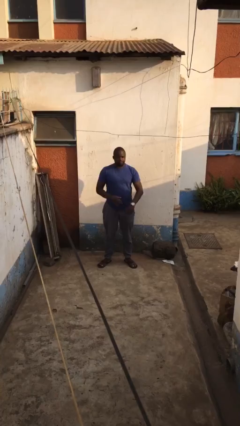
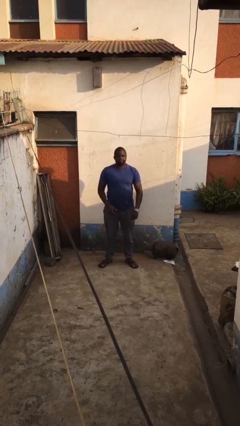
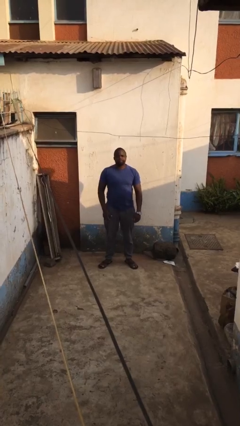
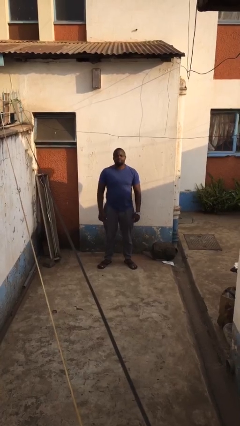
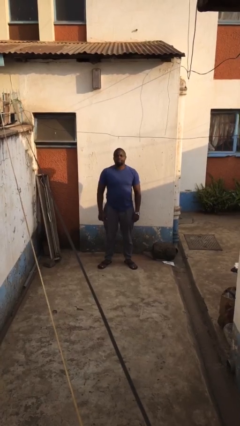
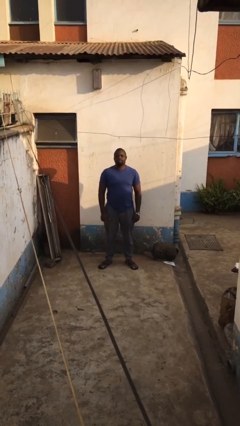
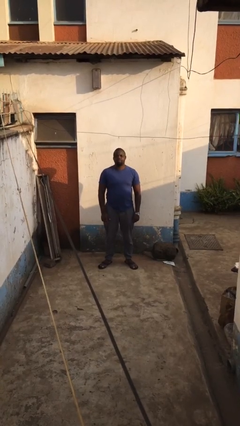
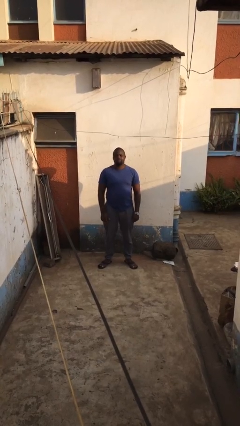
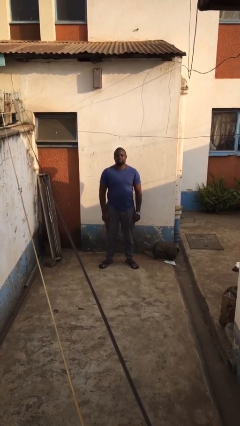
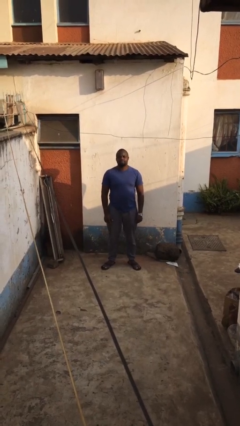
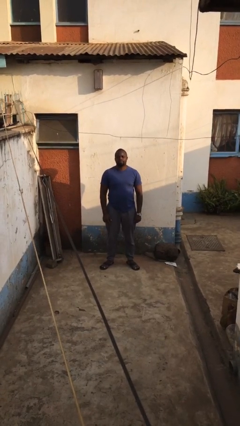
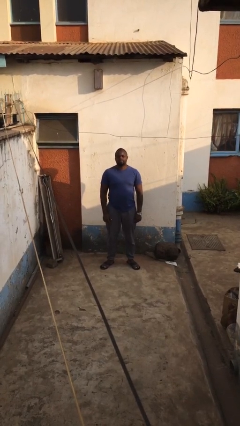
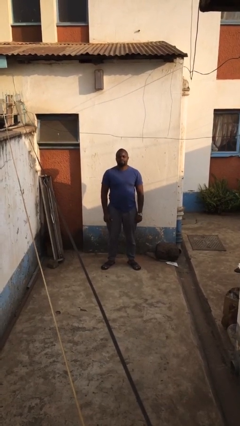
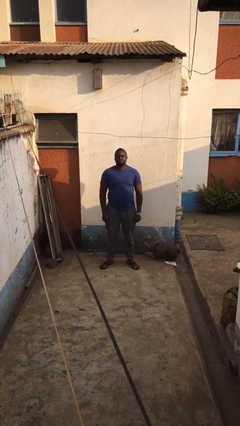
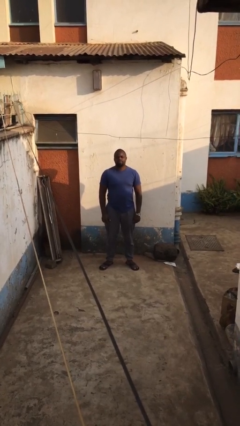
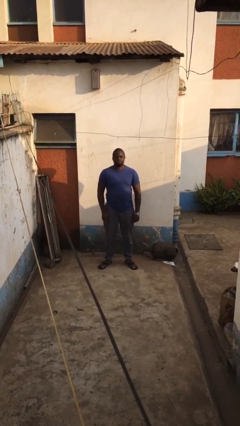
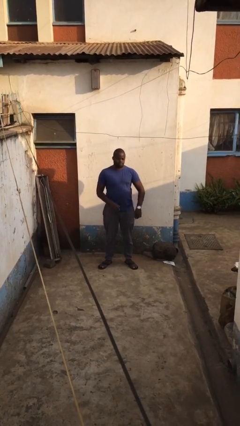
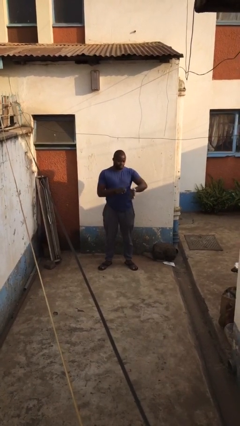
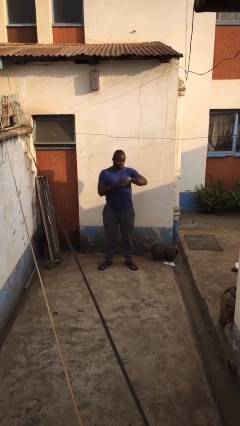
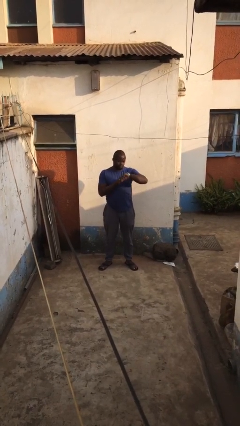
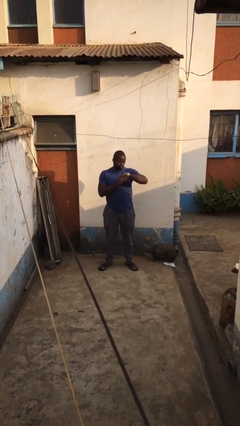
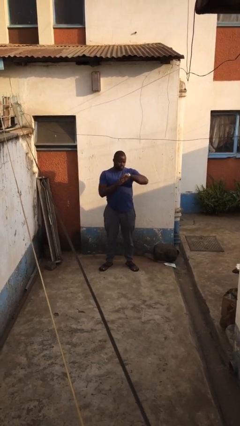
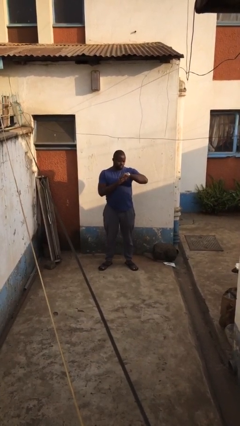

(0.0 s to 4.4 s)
person looks at wristwatch

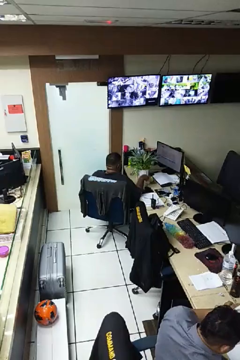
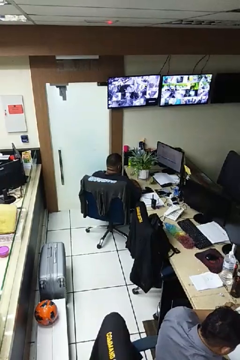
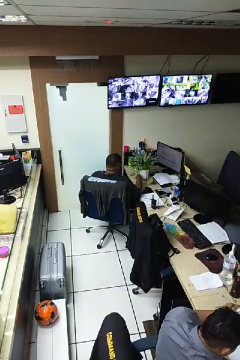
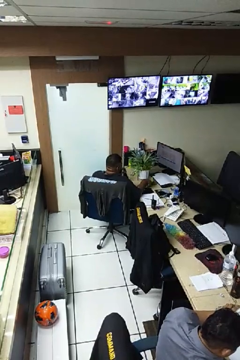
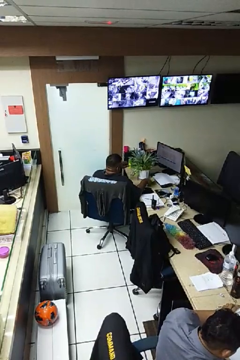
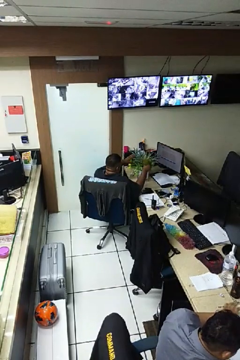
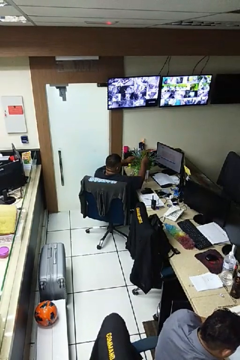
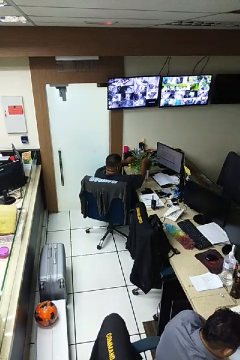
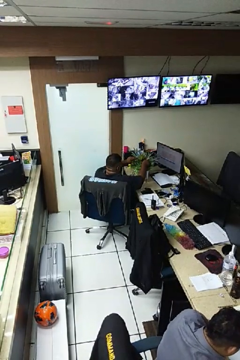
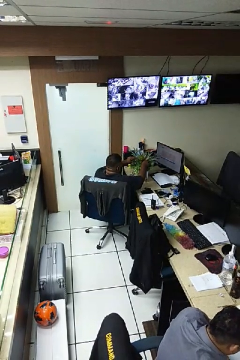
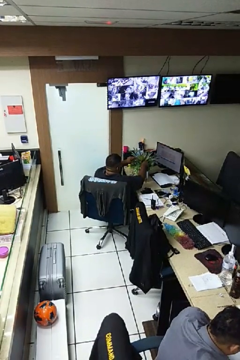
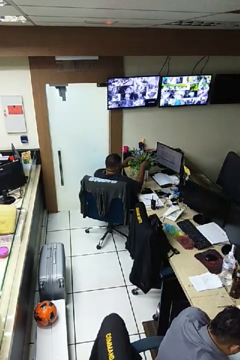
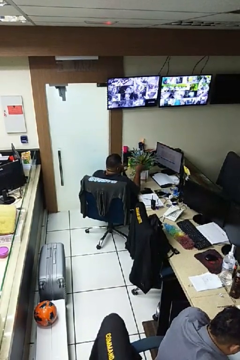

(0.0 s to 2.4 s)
person arranges flowers in vase

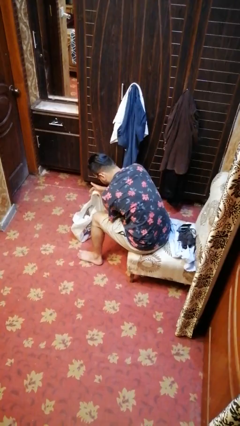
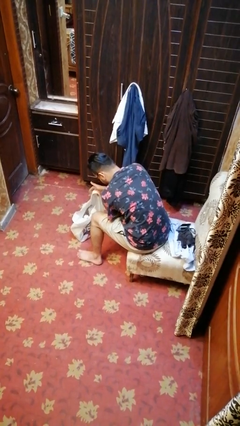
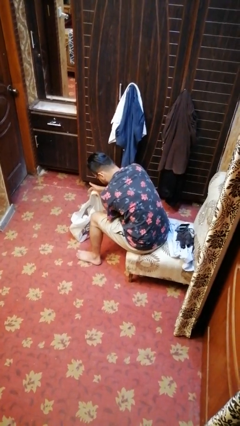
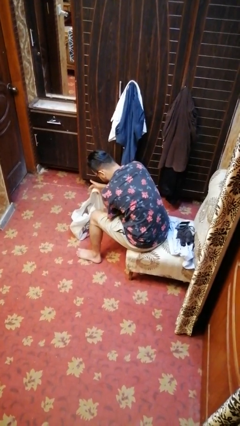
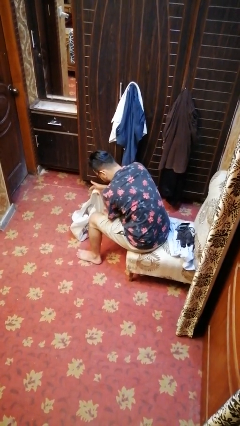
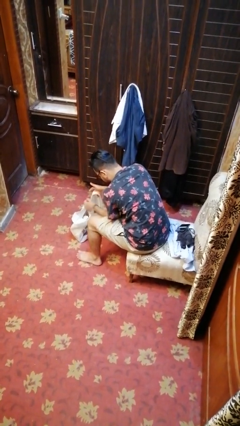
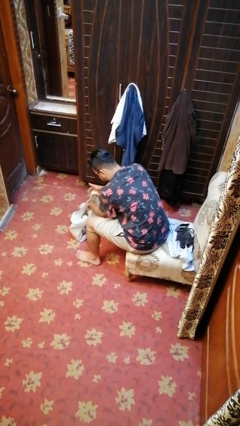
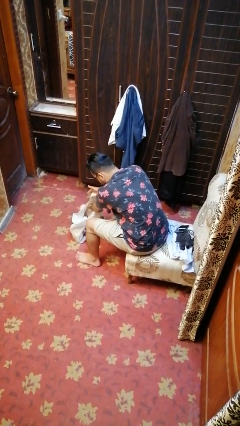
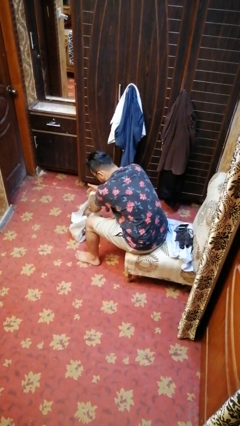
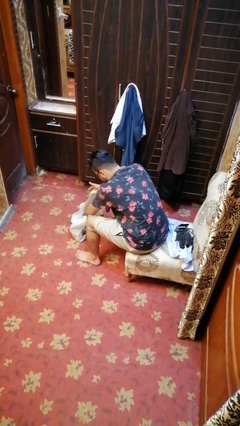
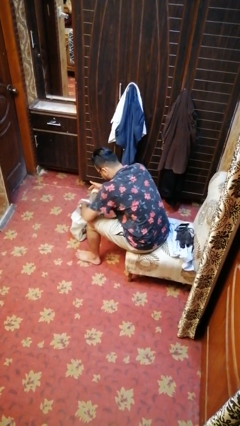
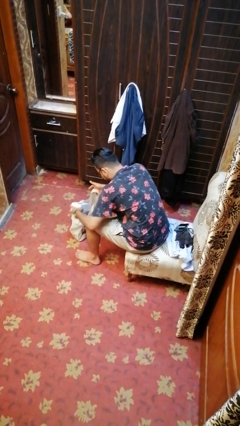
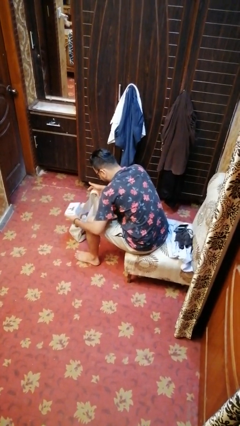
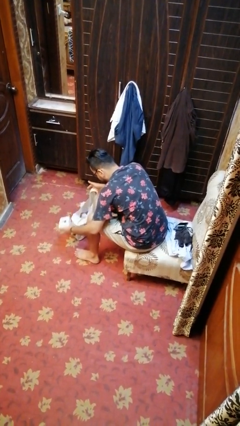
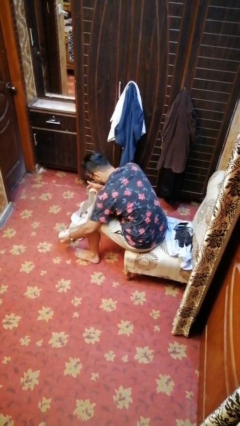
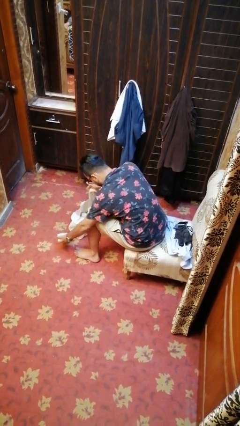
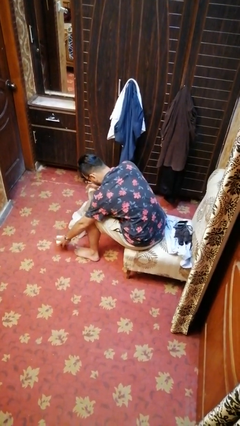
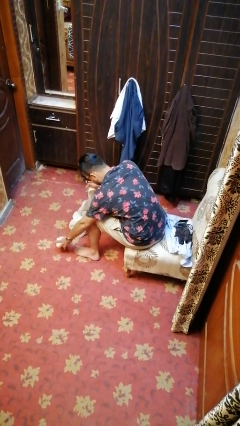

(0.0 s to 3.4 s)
person takes object from bag

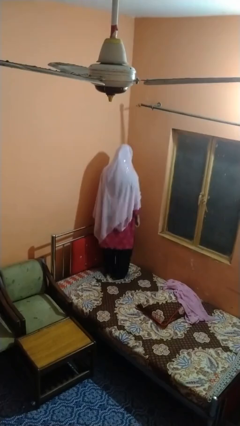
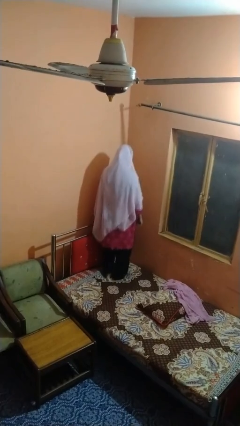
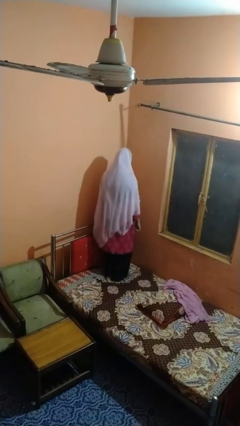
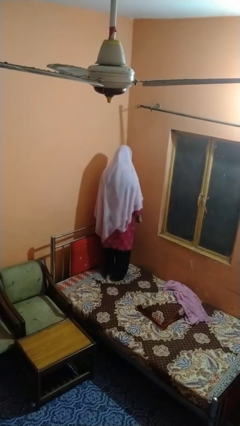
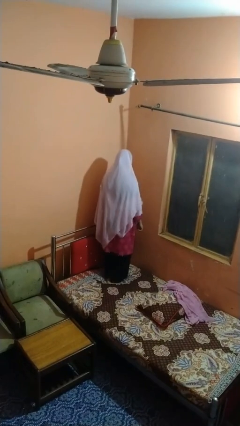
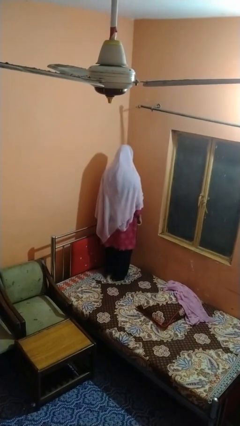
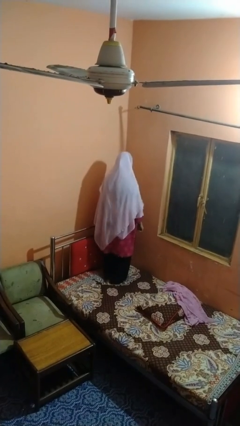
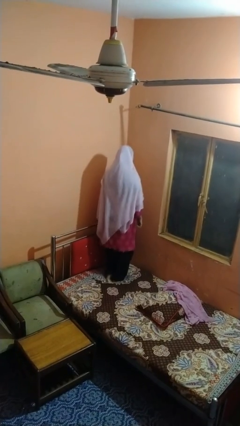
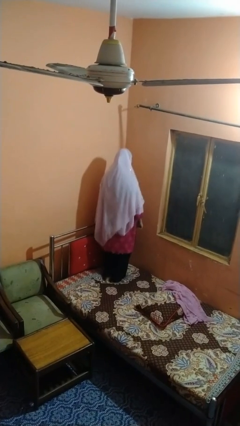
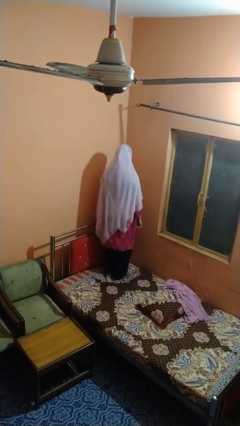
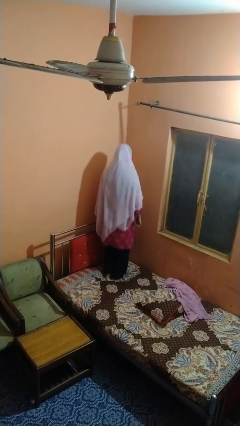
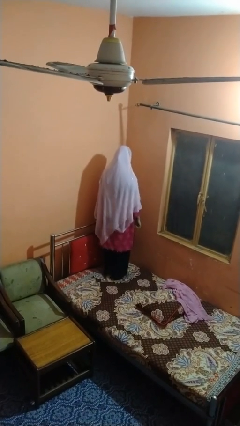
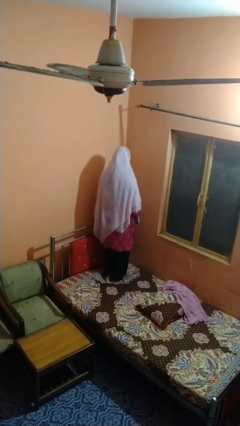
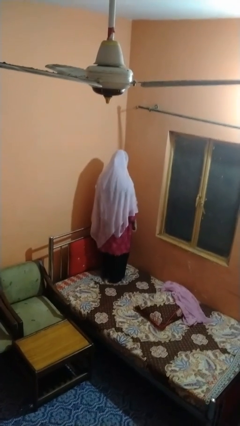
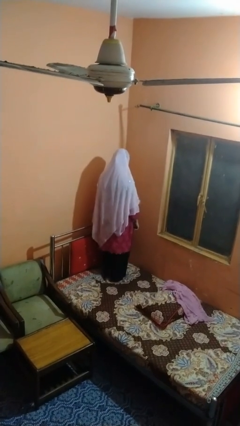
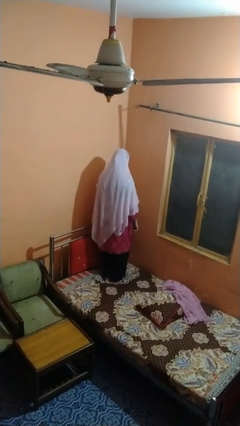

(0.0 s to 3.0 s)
person jumps on bed

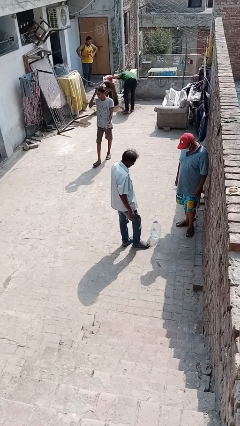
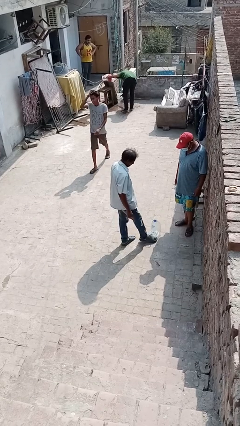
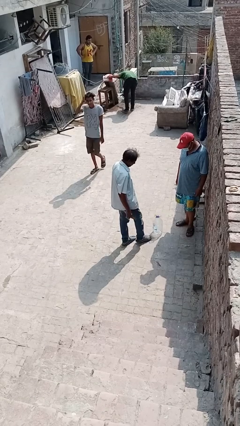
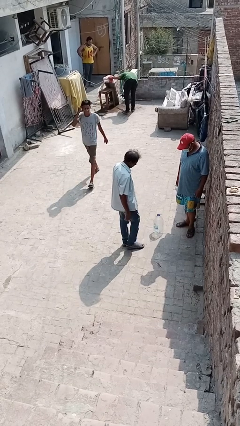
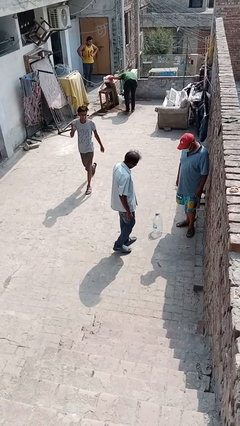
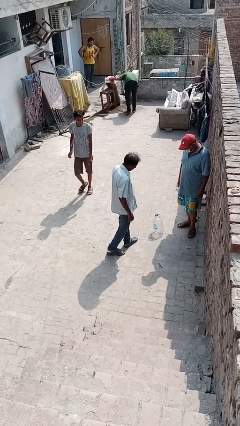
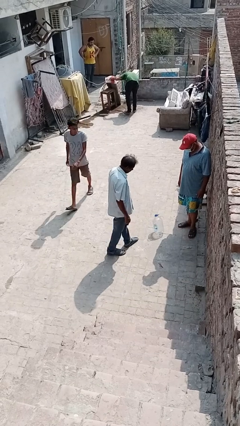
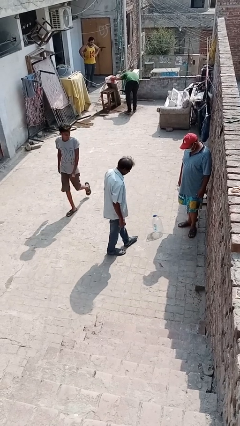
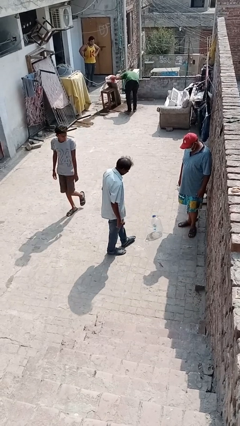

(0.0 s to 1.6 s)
person kicks object to person

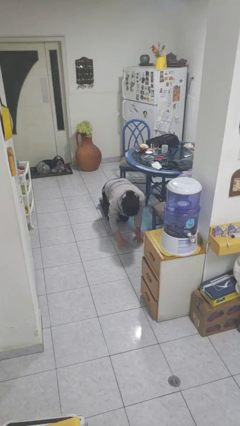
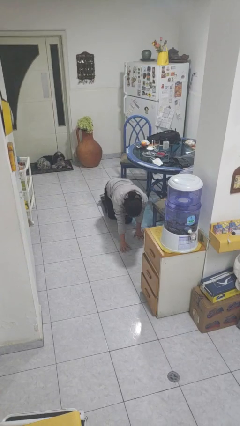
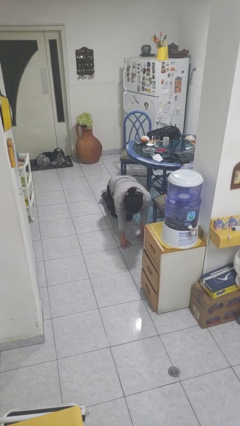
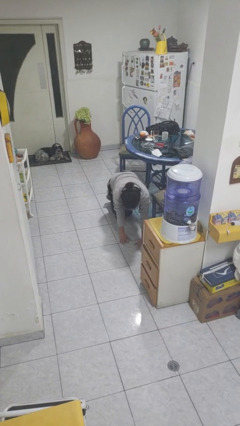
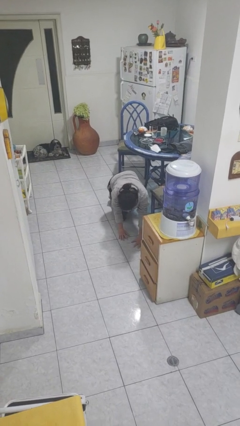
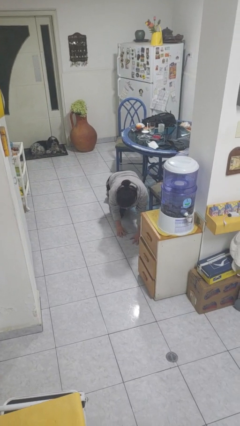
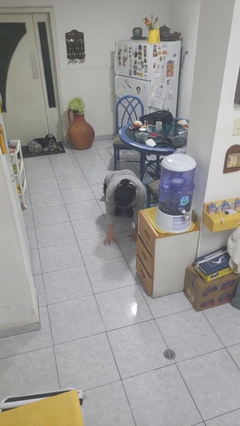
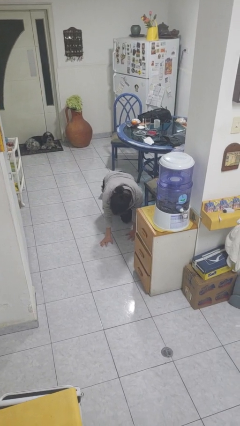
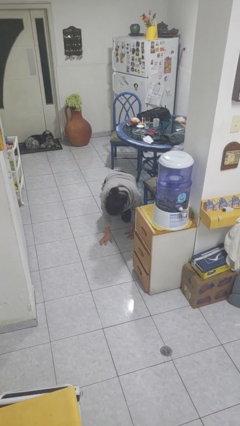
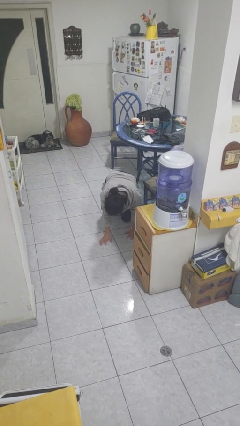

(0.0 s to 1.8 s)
person crawls

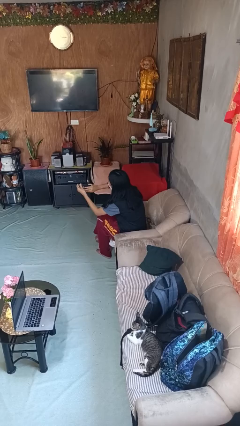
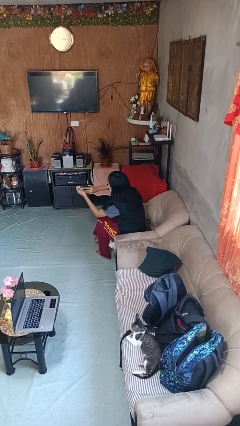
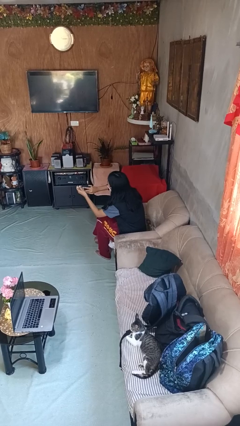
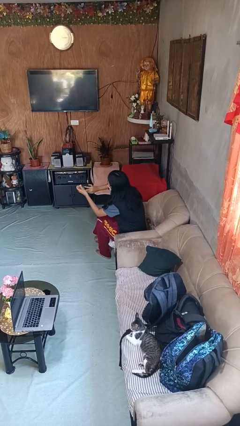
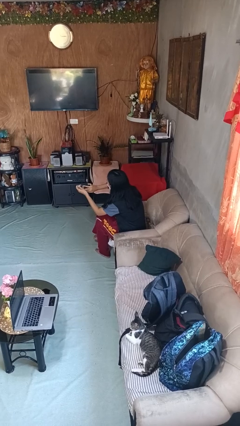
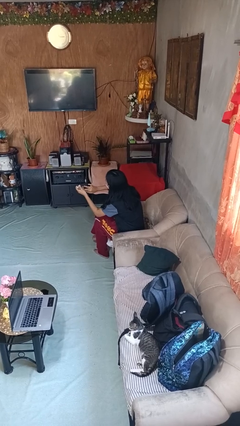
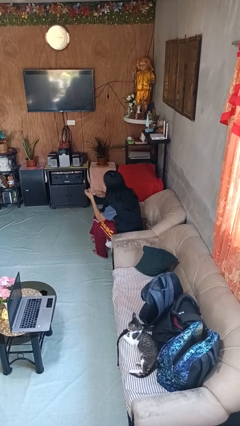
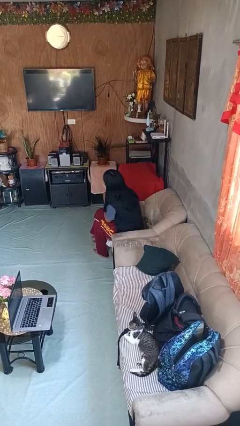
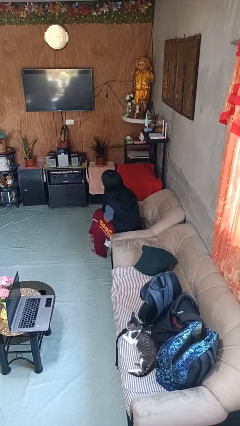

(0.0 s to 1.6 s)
person clips fingernails
